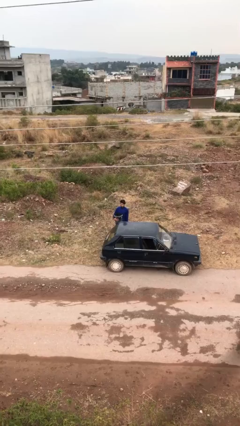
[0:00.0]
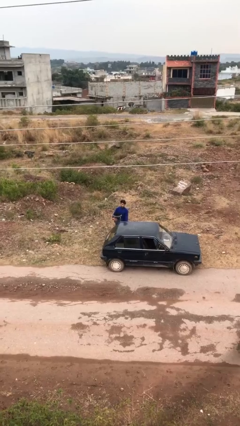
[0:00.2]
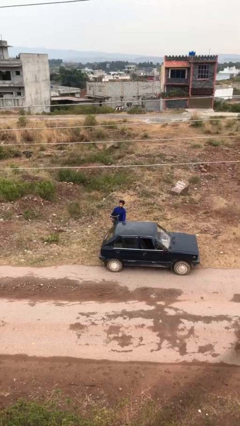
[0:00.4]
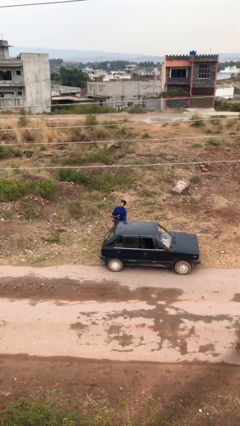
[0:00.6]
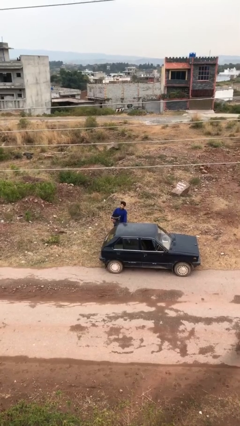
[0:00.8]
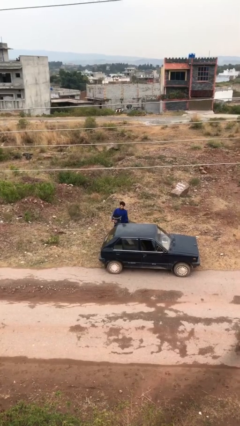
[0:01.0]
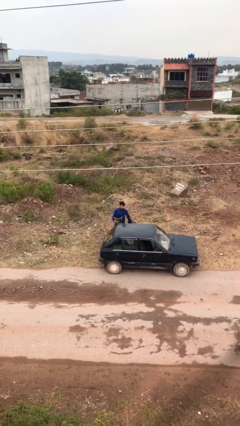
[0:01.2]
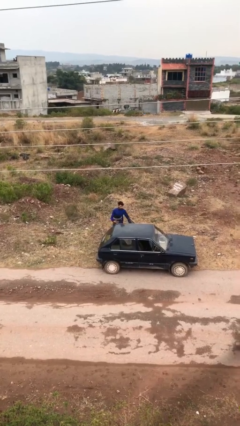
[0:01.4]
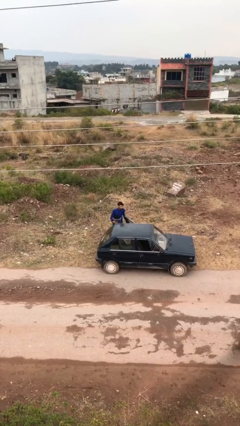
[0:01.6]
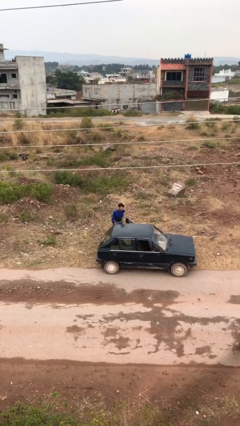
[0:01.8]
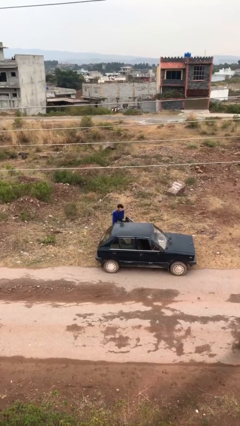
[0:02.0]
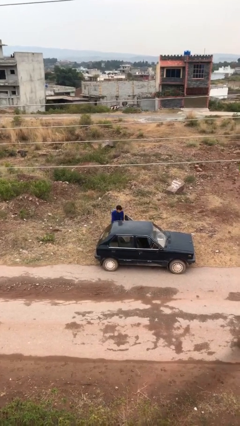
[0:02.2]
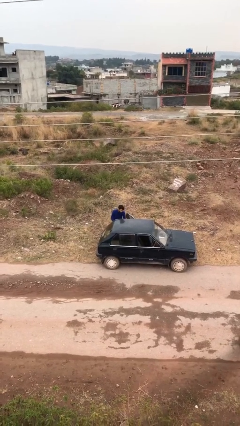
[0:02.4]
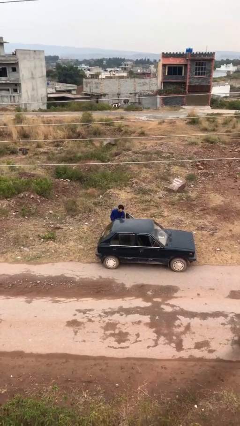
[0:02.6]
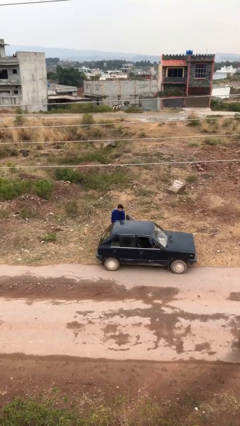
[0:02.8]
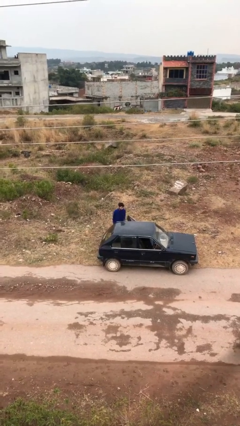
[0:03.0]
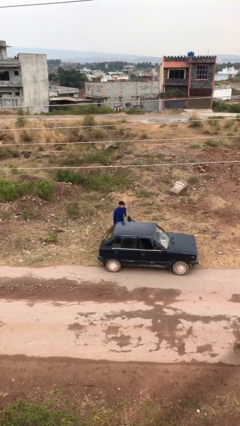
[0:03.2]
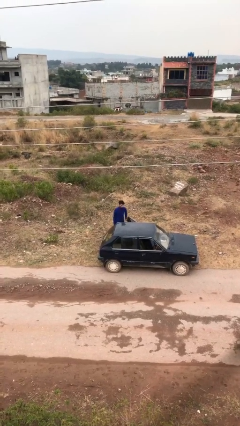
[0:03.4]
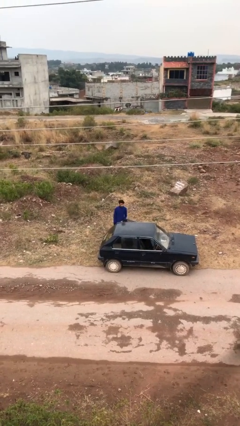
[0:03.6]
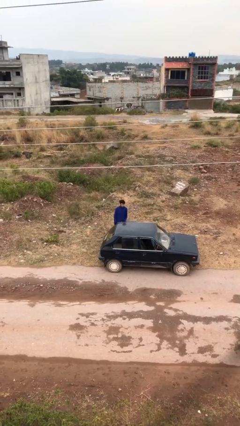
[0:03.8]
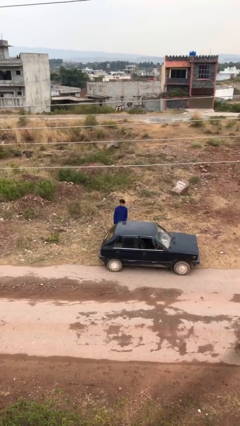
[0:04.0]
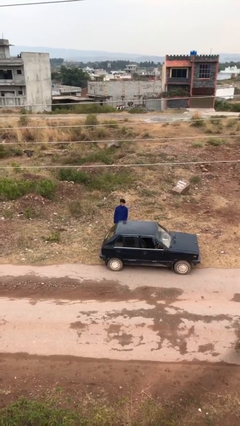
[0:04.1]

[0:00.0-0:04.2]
person loads car

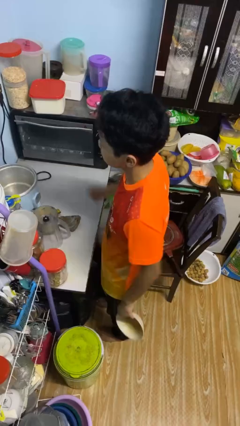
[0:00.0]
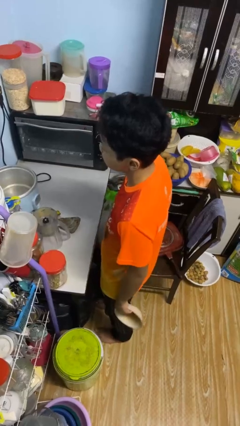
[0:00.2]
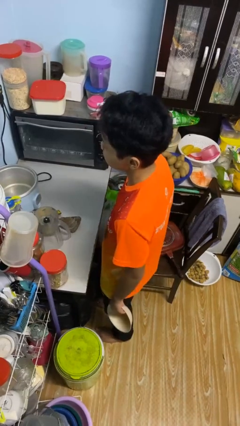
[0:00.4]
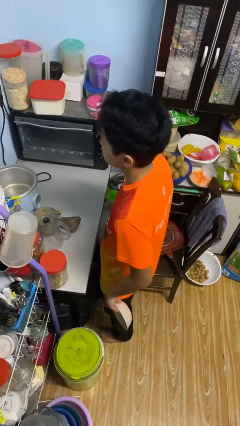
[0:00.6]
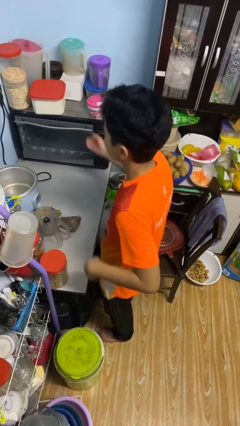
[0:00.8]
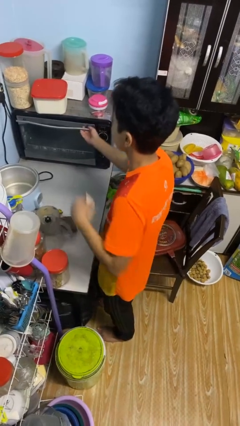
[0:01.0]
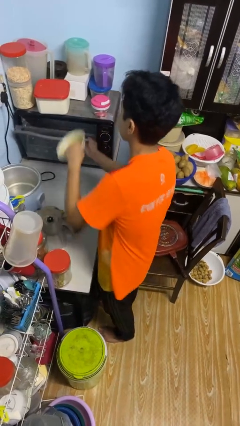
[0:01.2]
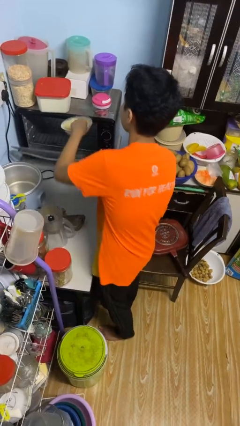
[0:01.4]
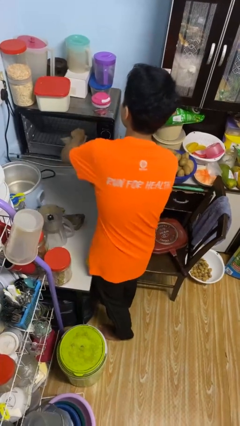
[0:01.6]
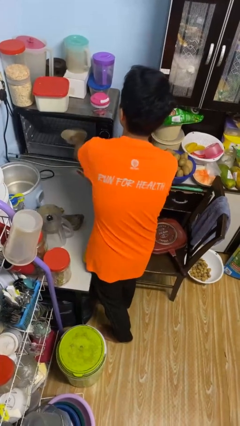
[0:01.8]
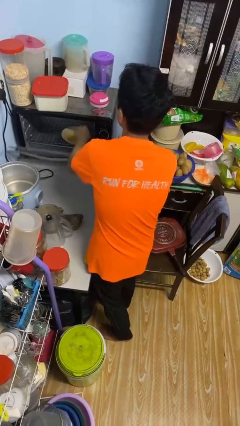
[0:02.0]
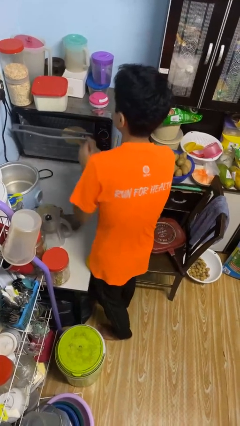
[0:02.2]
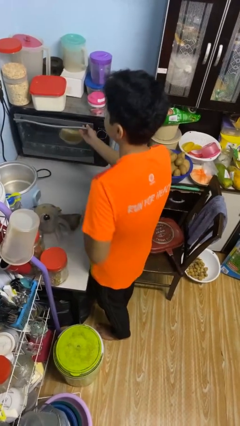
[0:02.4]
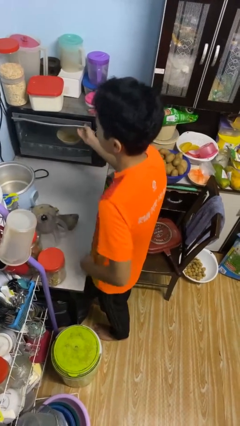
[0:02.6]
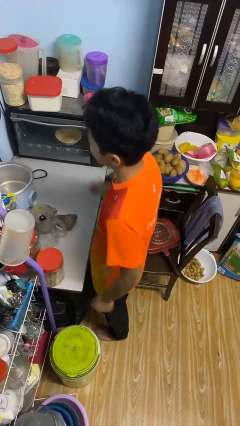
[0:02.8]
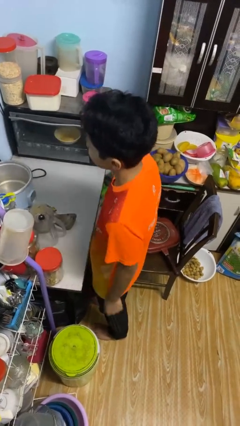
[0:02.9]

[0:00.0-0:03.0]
person puts object into oven

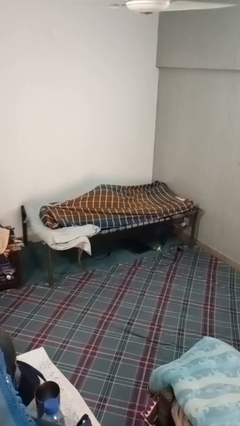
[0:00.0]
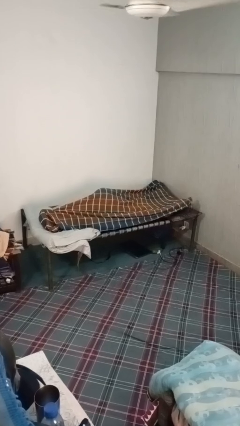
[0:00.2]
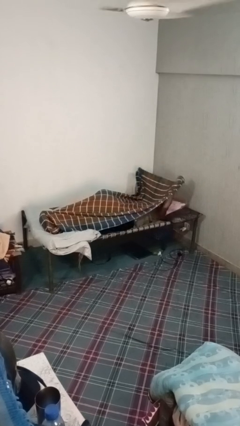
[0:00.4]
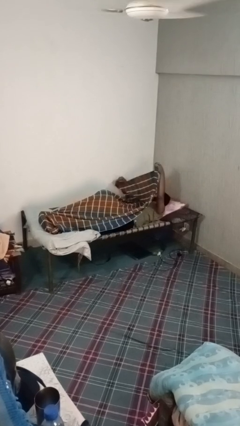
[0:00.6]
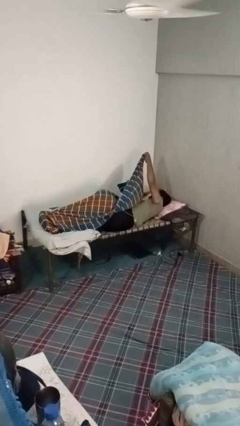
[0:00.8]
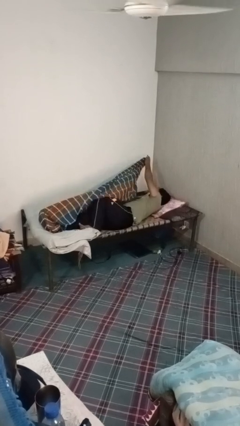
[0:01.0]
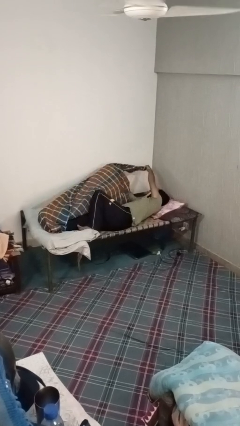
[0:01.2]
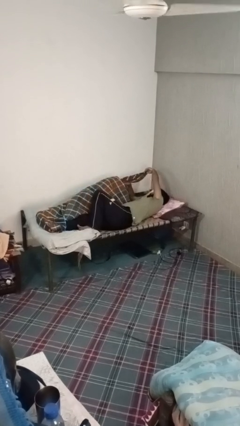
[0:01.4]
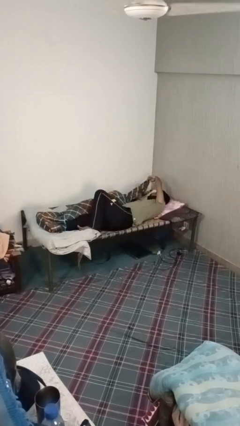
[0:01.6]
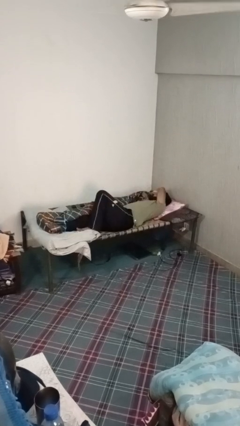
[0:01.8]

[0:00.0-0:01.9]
person uncovers with bedsheets

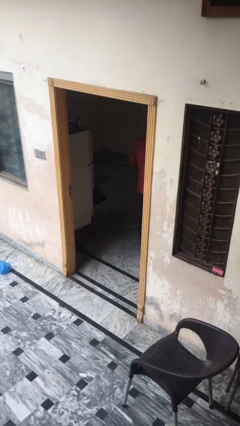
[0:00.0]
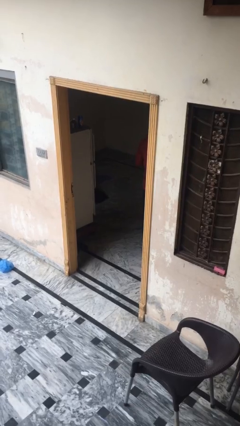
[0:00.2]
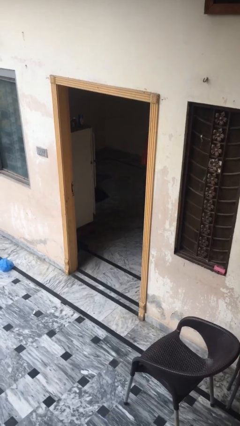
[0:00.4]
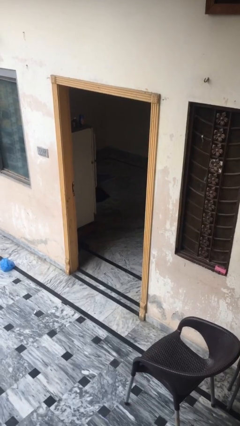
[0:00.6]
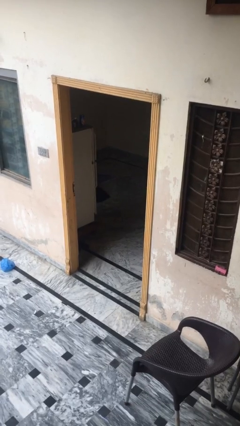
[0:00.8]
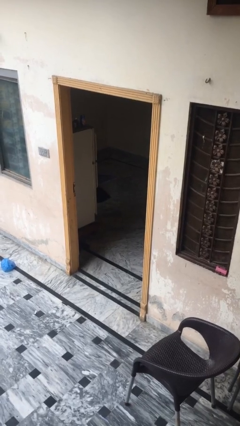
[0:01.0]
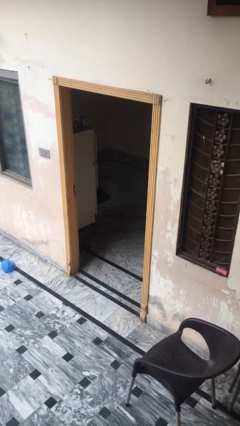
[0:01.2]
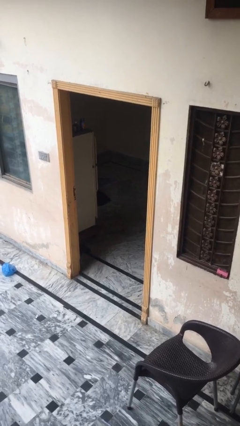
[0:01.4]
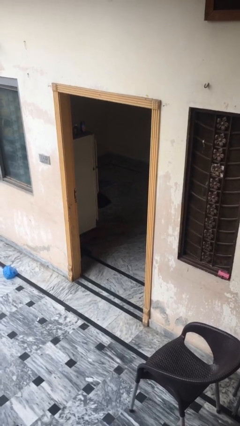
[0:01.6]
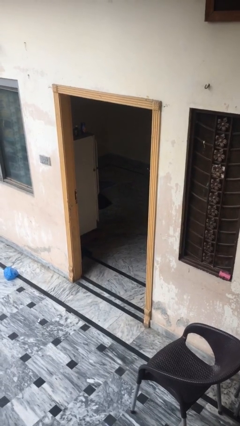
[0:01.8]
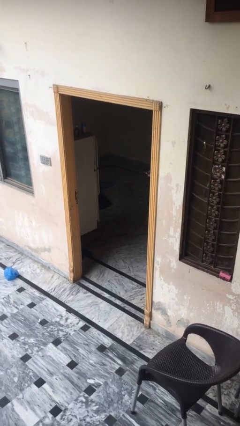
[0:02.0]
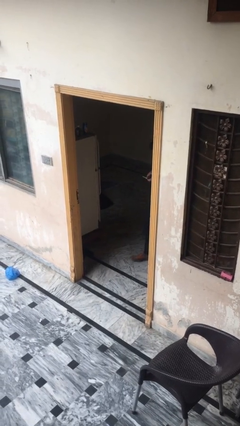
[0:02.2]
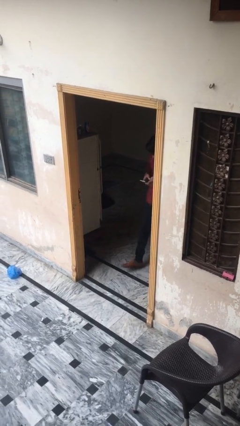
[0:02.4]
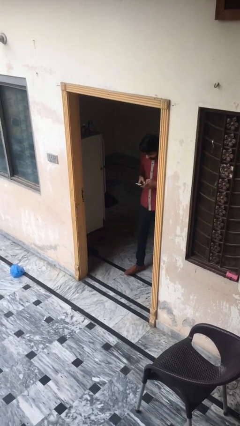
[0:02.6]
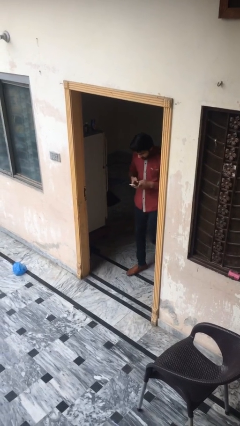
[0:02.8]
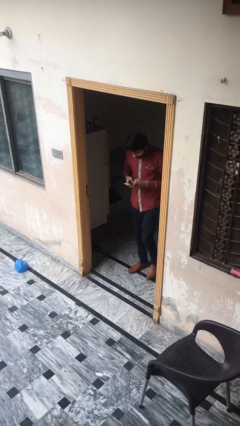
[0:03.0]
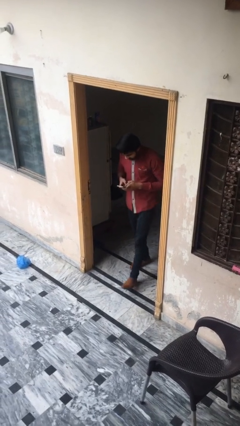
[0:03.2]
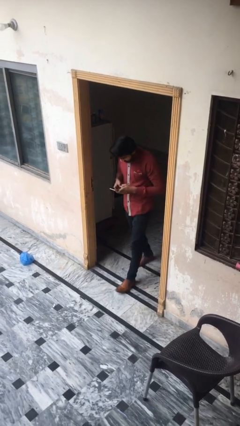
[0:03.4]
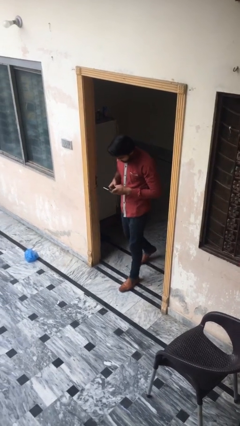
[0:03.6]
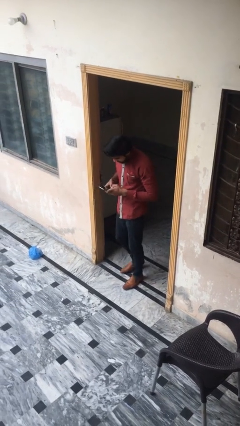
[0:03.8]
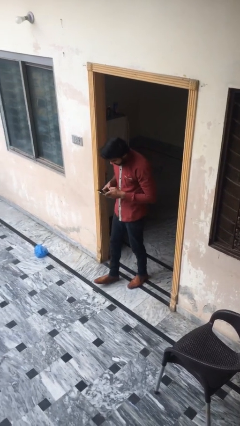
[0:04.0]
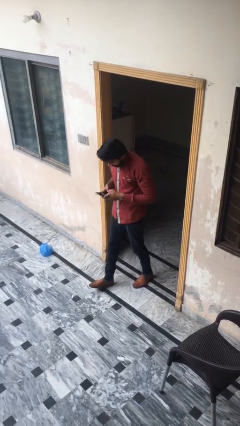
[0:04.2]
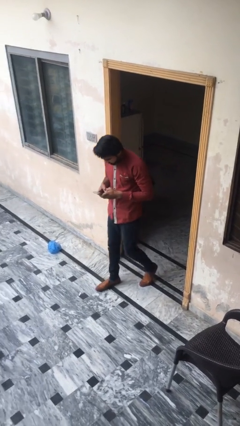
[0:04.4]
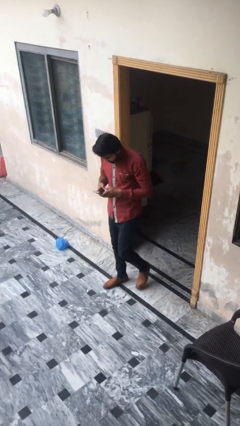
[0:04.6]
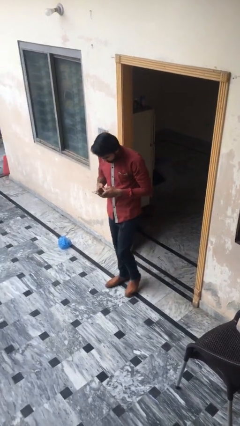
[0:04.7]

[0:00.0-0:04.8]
person enters scene through structure

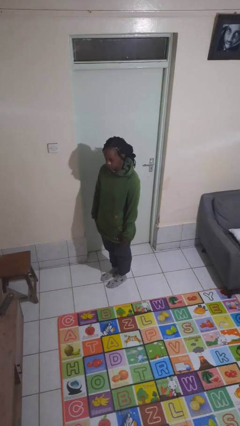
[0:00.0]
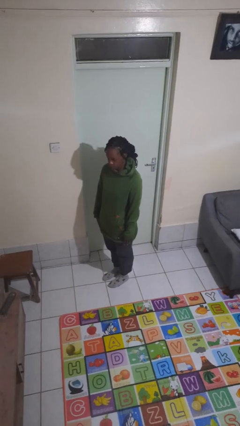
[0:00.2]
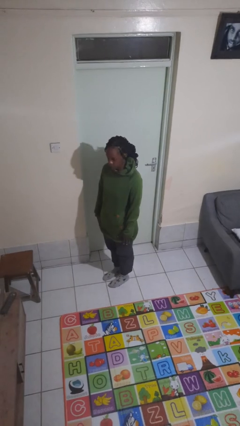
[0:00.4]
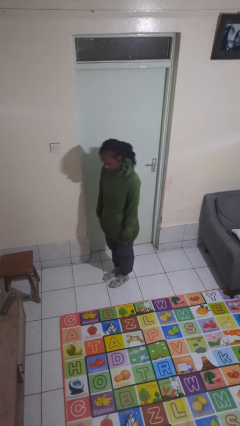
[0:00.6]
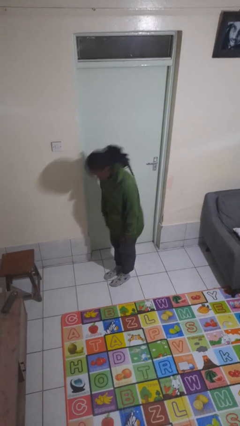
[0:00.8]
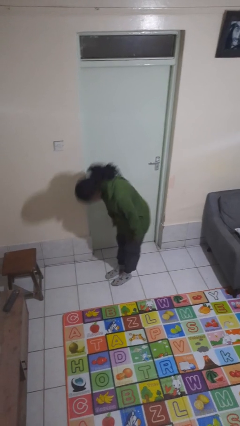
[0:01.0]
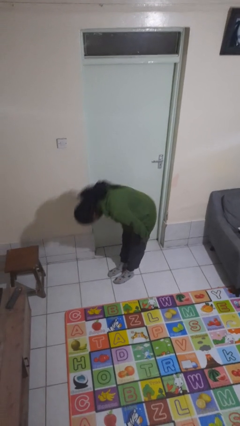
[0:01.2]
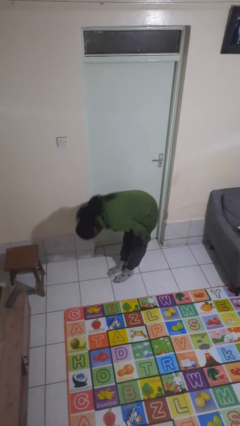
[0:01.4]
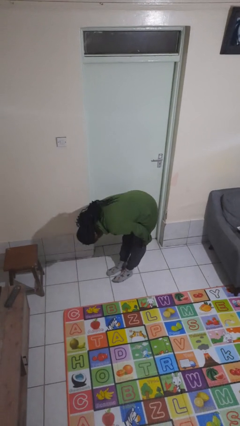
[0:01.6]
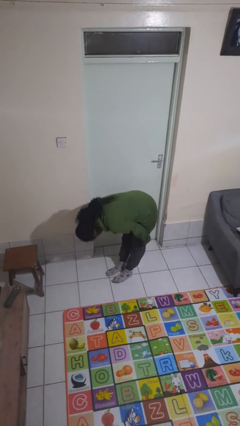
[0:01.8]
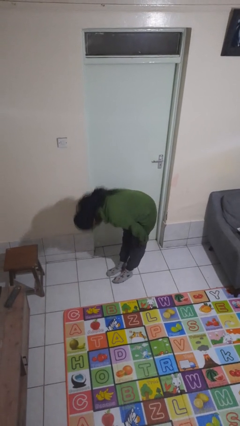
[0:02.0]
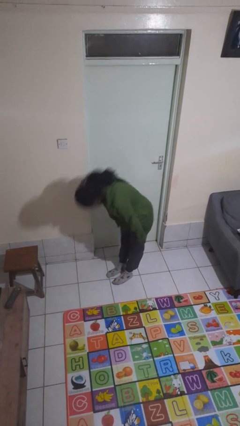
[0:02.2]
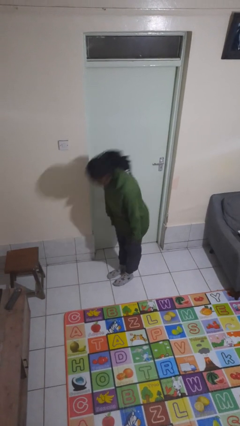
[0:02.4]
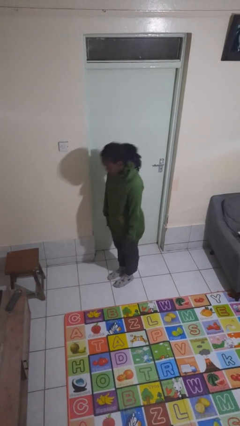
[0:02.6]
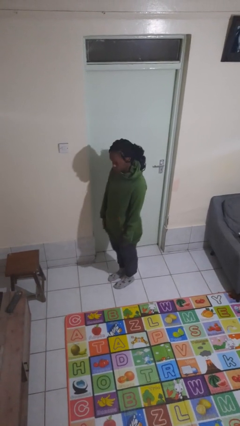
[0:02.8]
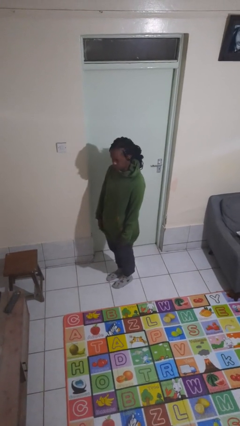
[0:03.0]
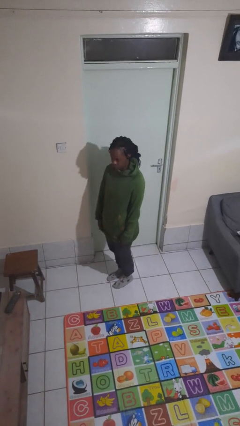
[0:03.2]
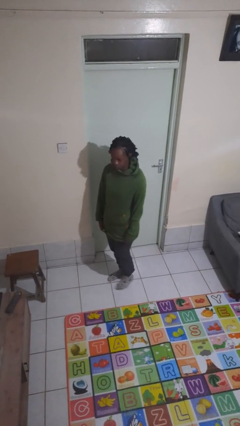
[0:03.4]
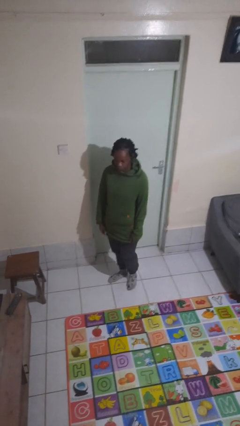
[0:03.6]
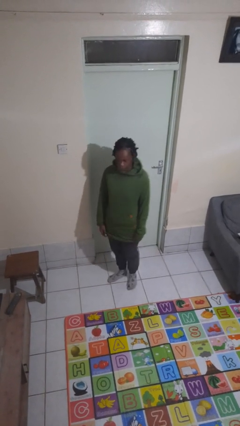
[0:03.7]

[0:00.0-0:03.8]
person bows

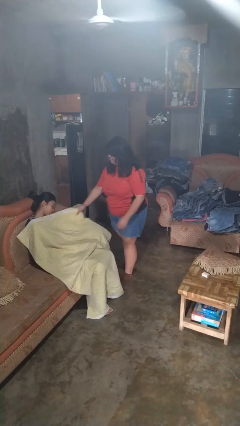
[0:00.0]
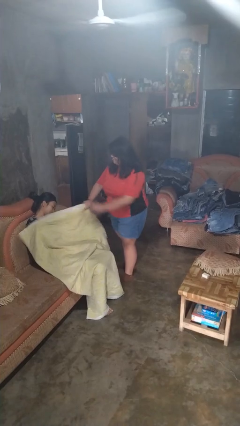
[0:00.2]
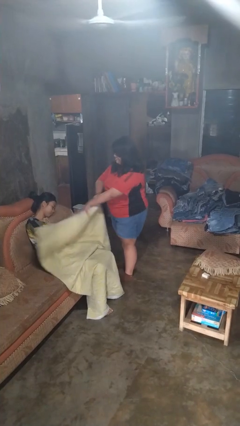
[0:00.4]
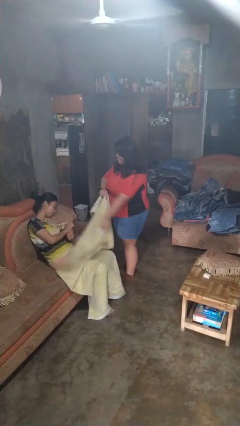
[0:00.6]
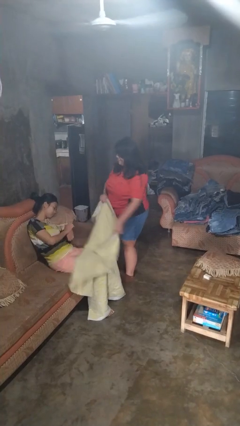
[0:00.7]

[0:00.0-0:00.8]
person uncovers friend with blanket
